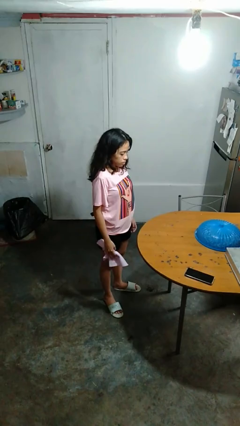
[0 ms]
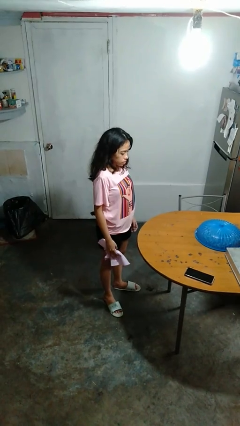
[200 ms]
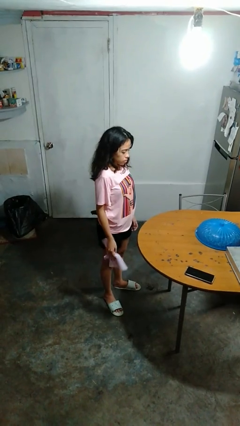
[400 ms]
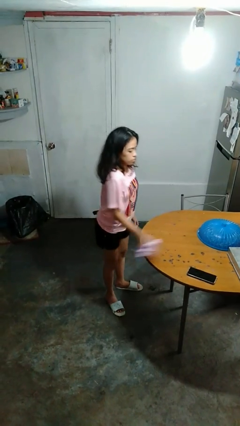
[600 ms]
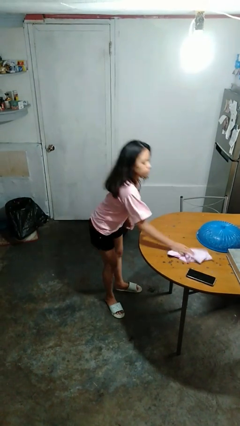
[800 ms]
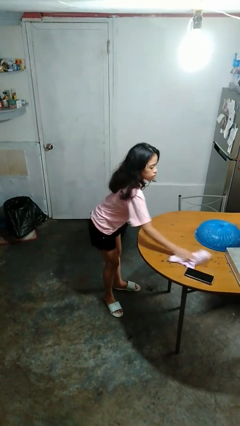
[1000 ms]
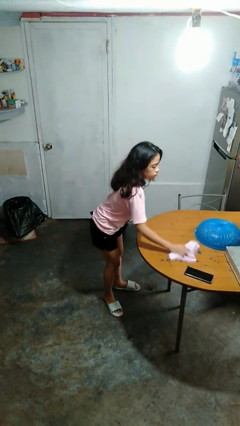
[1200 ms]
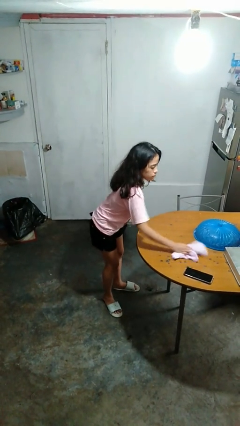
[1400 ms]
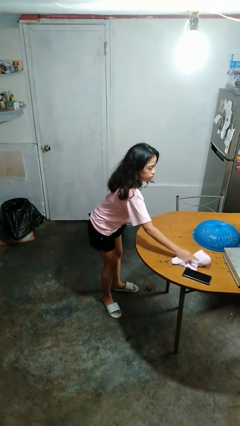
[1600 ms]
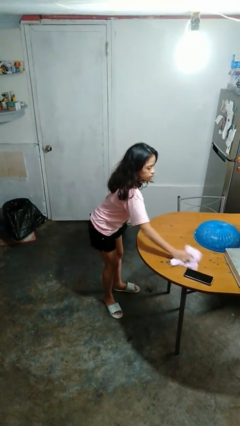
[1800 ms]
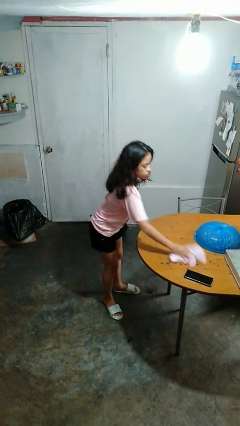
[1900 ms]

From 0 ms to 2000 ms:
person cleans table with rag

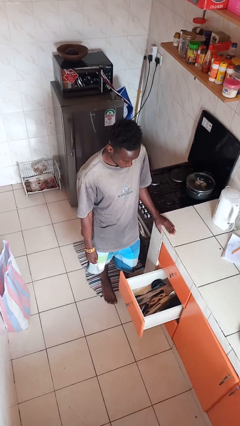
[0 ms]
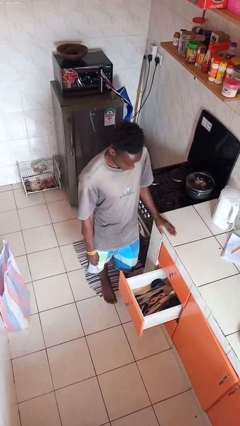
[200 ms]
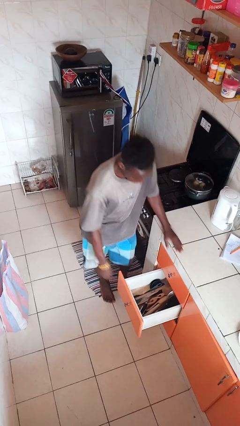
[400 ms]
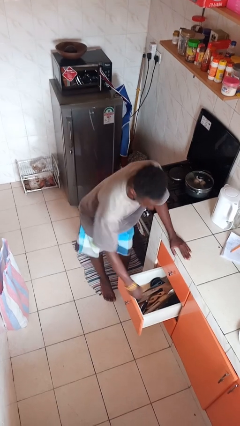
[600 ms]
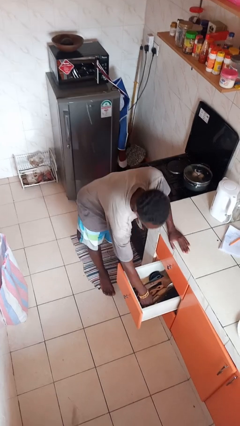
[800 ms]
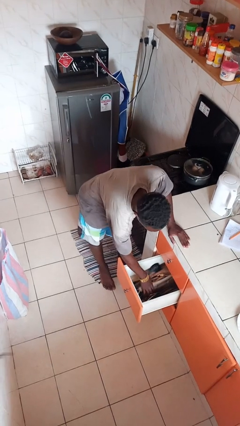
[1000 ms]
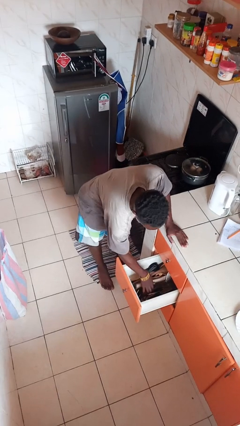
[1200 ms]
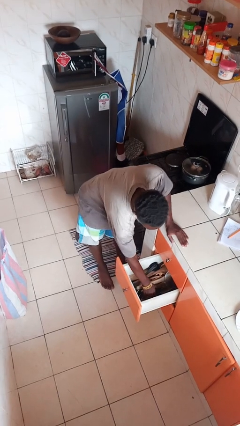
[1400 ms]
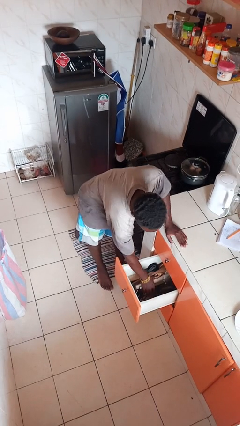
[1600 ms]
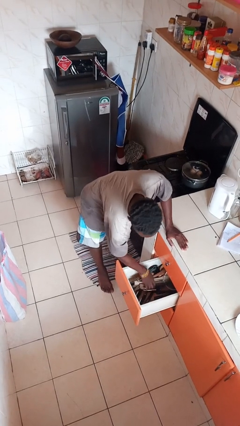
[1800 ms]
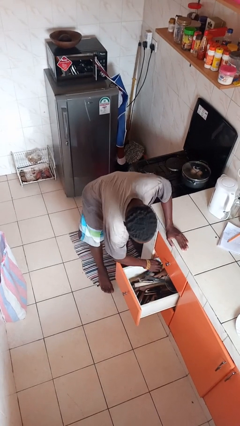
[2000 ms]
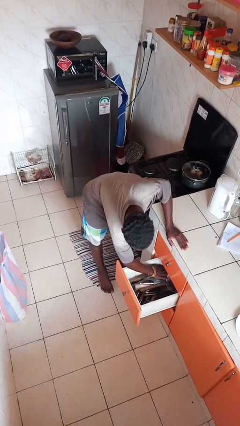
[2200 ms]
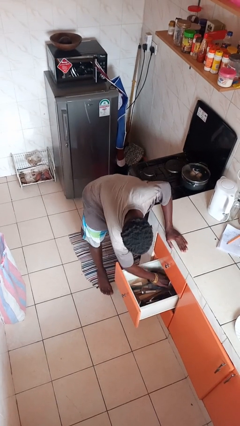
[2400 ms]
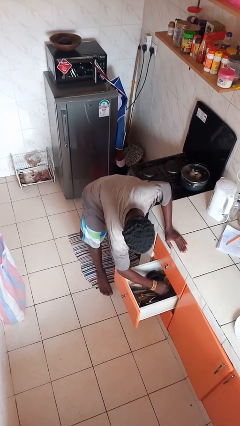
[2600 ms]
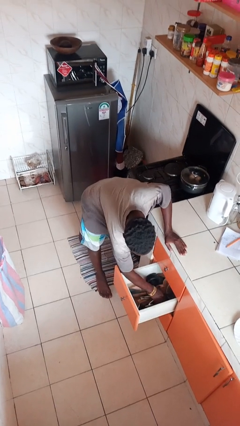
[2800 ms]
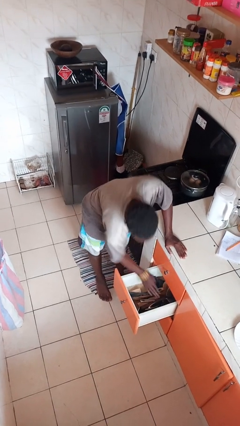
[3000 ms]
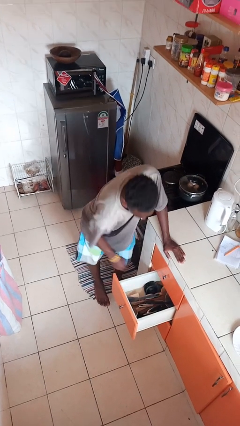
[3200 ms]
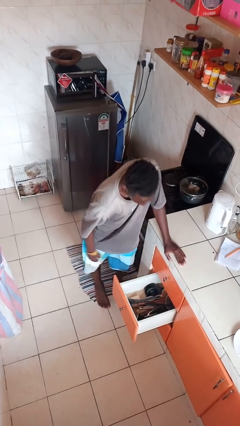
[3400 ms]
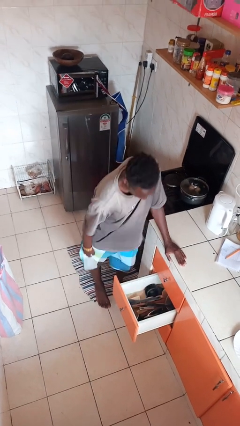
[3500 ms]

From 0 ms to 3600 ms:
person searches in kitchen drawer

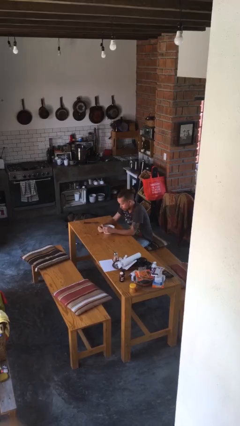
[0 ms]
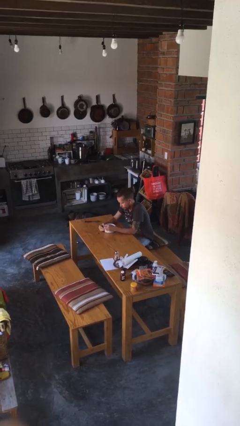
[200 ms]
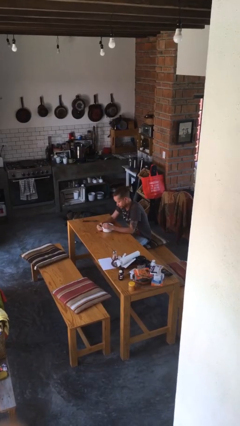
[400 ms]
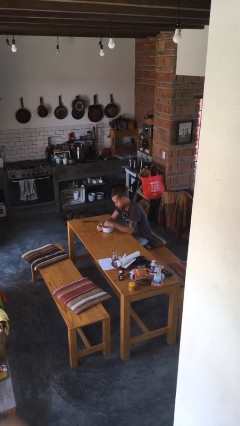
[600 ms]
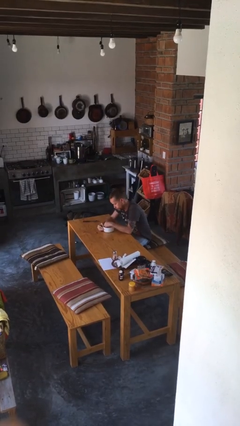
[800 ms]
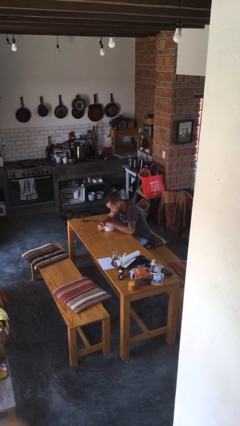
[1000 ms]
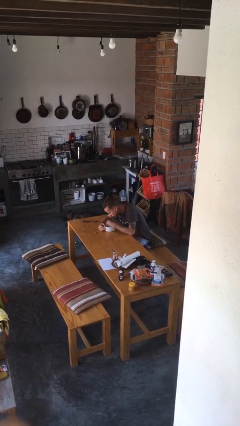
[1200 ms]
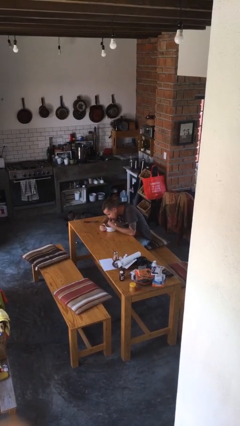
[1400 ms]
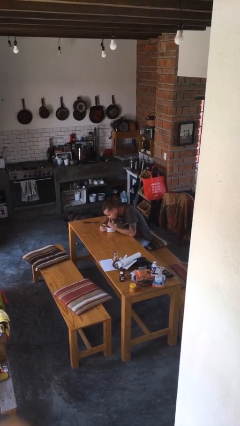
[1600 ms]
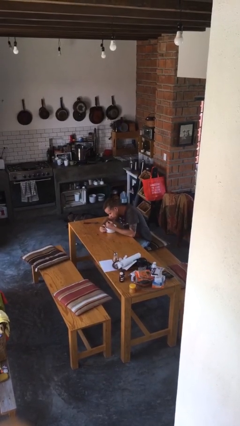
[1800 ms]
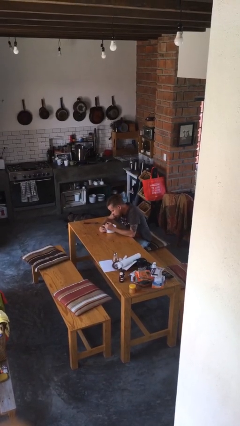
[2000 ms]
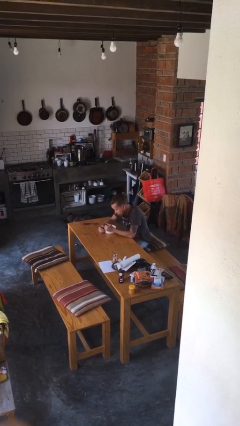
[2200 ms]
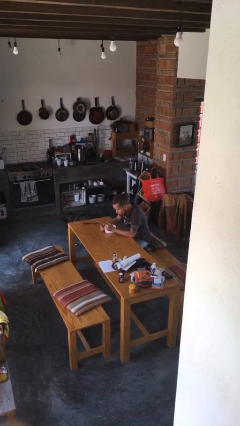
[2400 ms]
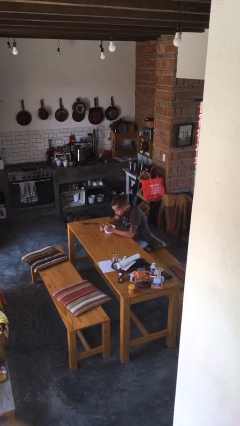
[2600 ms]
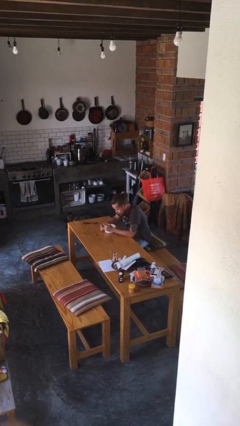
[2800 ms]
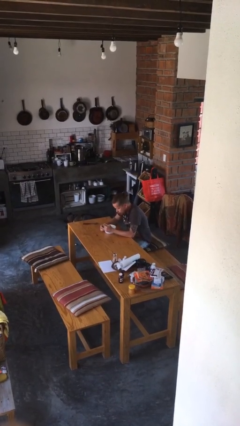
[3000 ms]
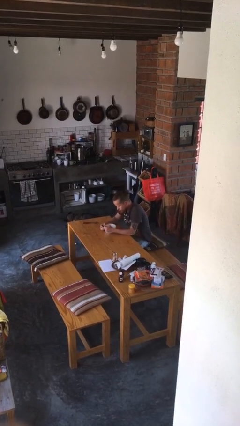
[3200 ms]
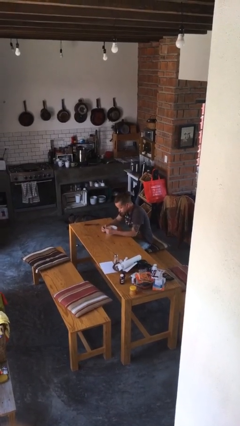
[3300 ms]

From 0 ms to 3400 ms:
person eats with hands

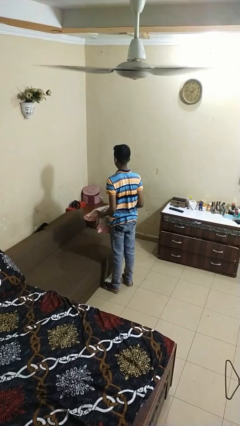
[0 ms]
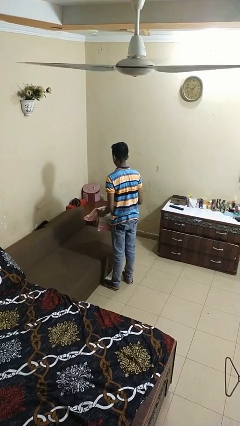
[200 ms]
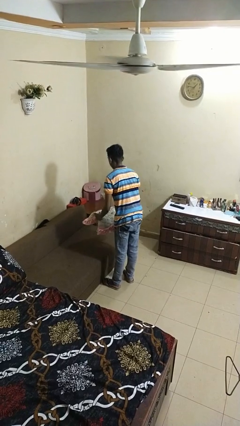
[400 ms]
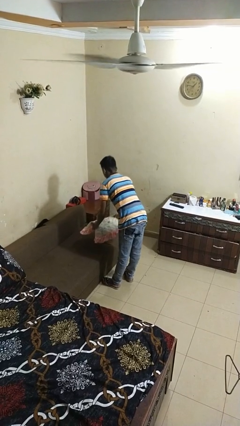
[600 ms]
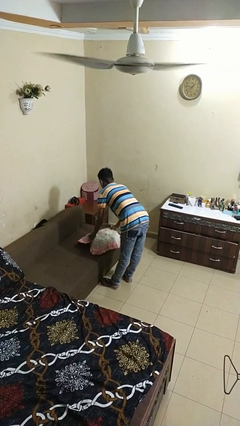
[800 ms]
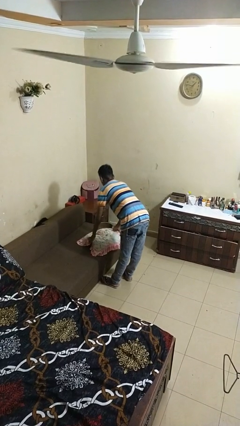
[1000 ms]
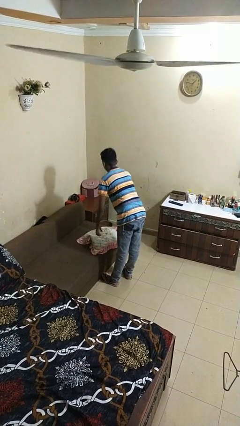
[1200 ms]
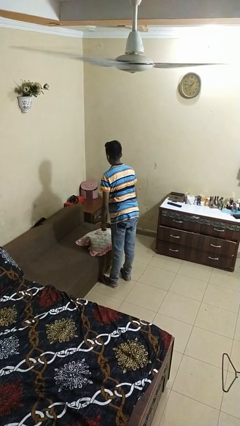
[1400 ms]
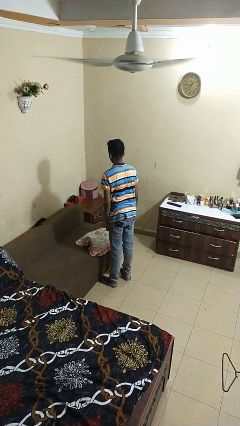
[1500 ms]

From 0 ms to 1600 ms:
person puts down object on couch

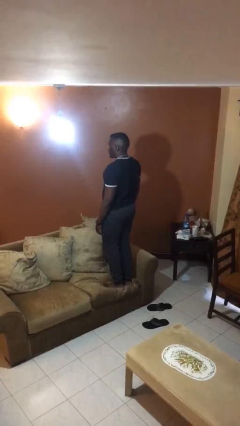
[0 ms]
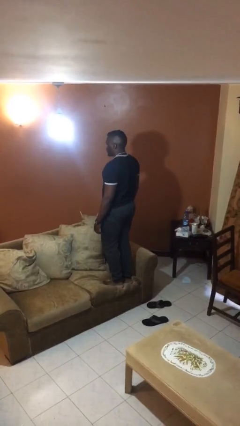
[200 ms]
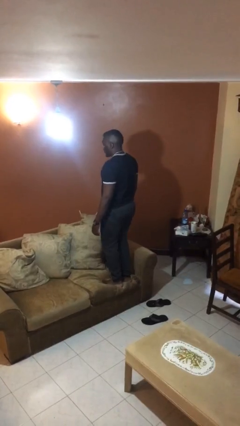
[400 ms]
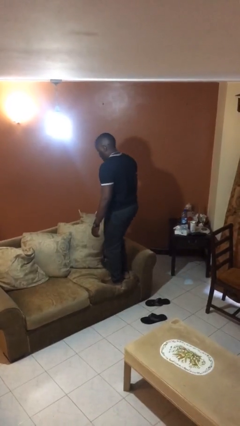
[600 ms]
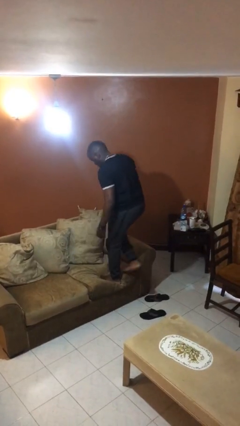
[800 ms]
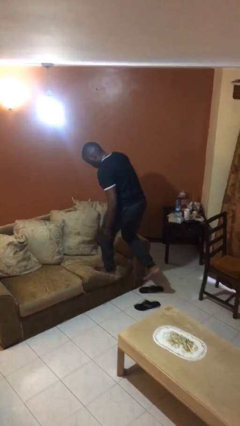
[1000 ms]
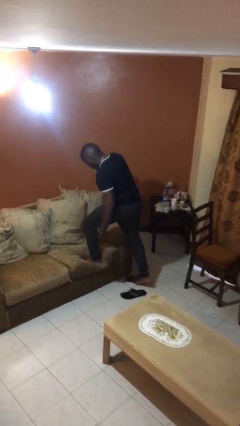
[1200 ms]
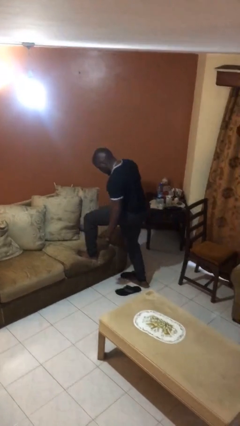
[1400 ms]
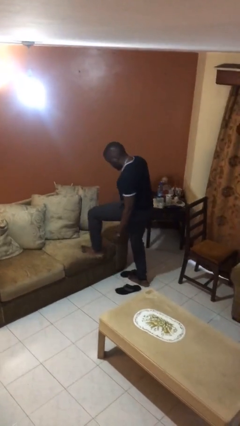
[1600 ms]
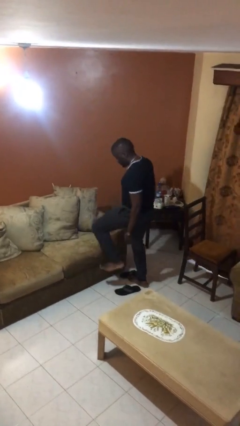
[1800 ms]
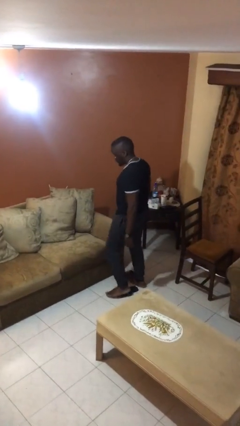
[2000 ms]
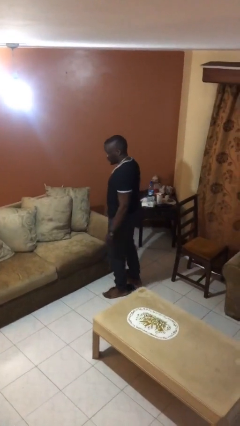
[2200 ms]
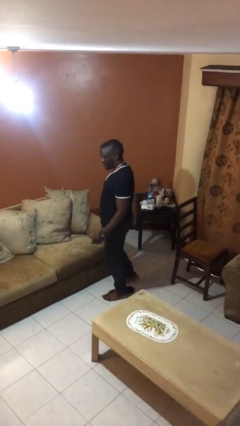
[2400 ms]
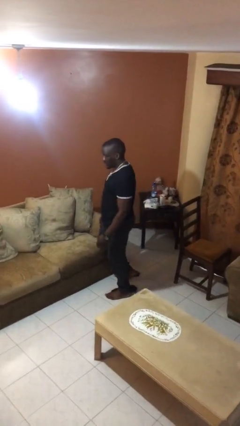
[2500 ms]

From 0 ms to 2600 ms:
person climbs off couch

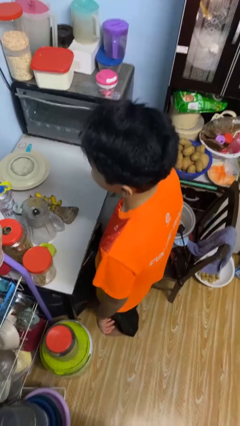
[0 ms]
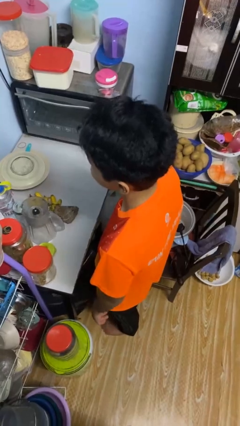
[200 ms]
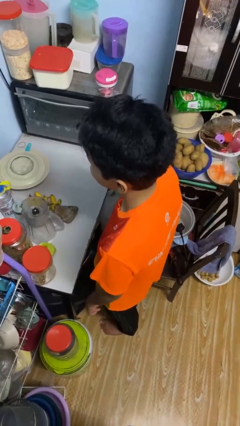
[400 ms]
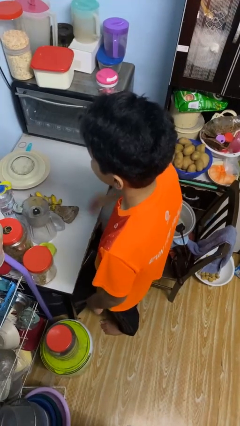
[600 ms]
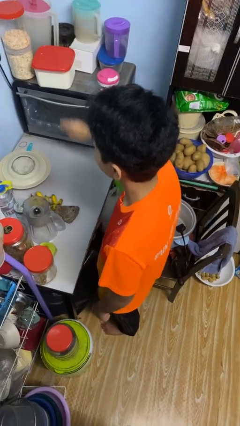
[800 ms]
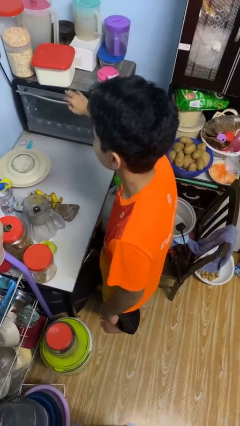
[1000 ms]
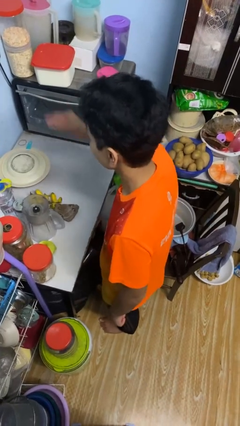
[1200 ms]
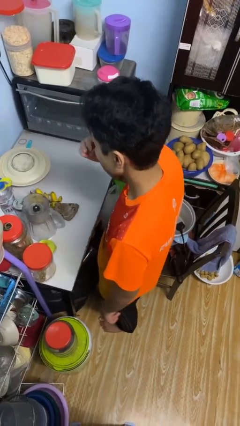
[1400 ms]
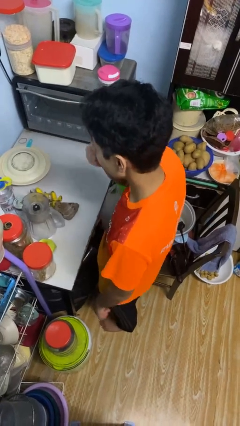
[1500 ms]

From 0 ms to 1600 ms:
person burns hand

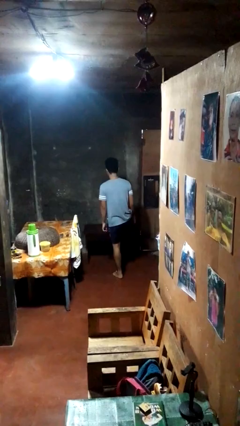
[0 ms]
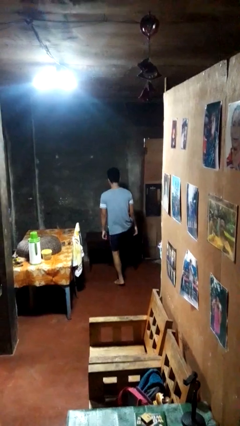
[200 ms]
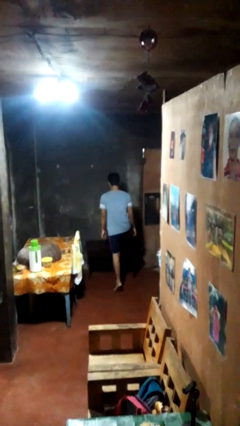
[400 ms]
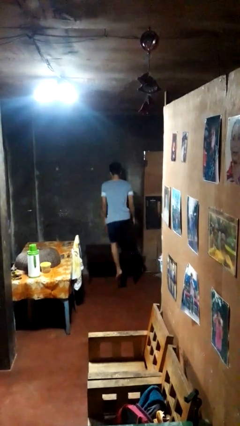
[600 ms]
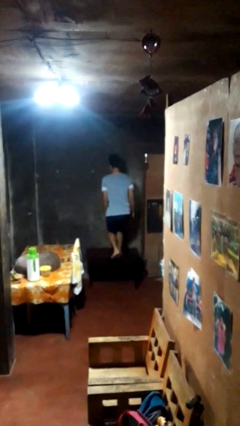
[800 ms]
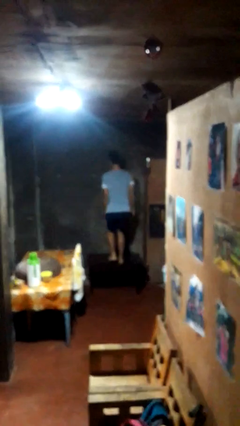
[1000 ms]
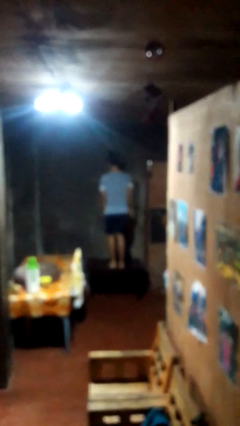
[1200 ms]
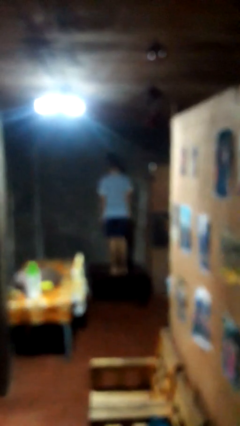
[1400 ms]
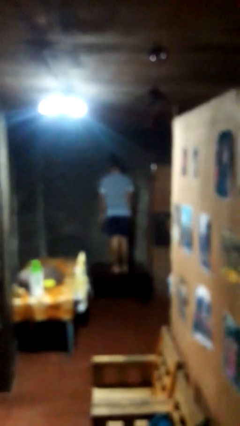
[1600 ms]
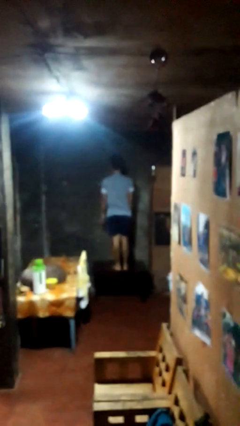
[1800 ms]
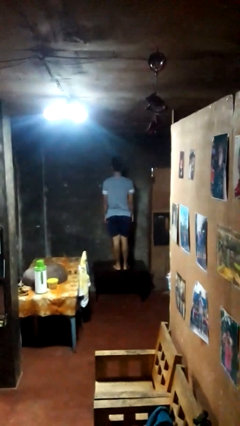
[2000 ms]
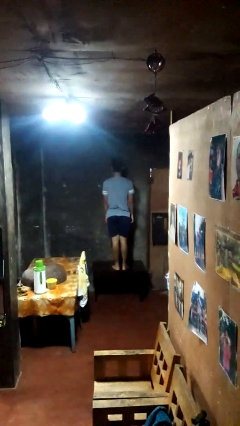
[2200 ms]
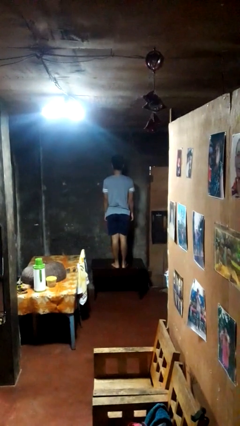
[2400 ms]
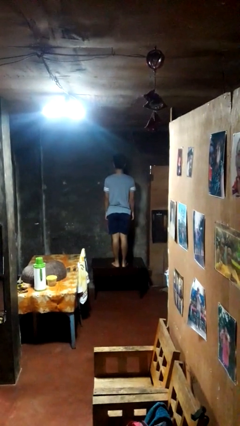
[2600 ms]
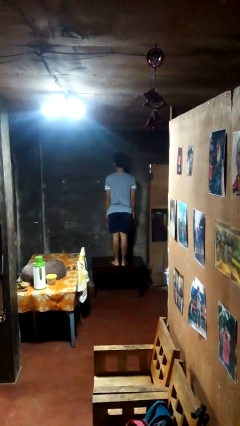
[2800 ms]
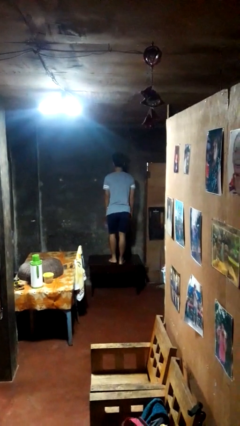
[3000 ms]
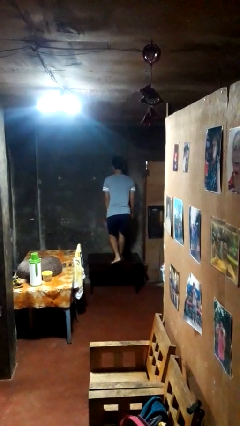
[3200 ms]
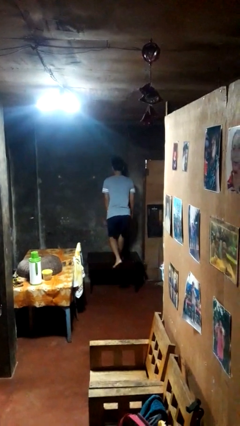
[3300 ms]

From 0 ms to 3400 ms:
person climbs on table
